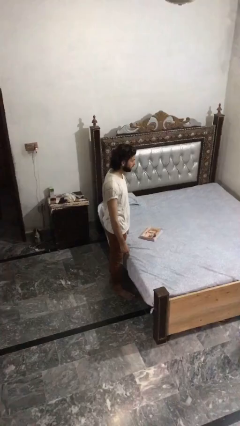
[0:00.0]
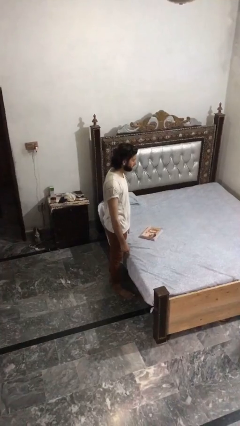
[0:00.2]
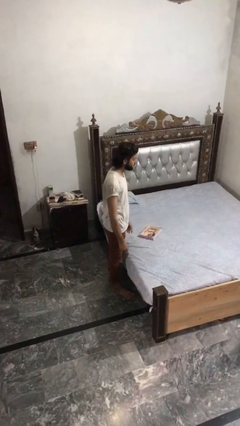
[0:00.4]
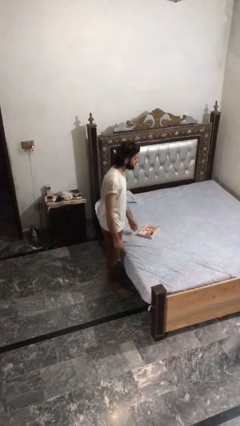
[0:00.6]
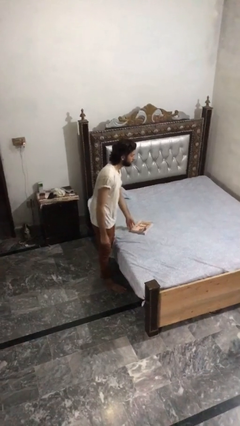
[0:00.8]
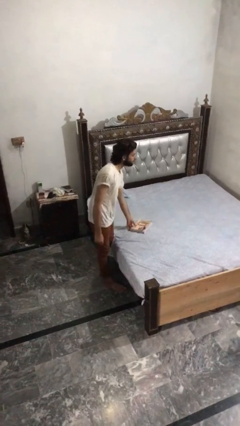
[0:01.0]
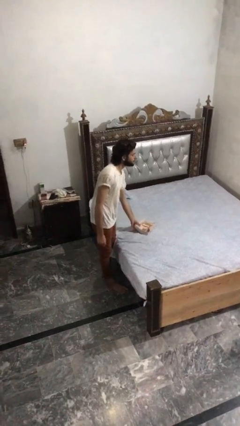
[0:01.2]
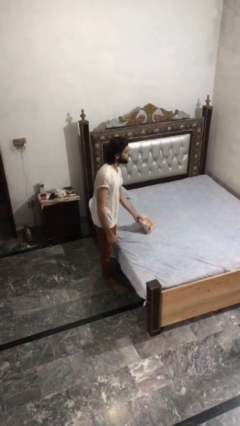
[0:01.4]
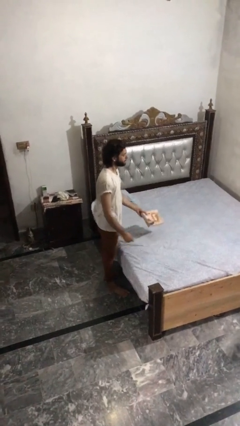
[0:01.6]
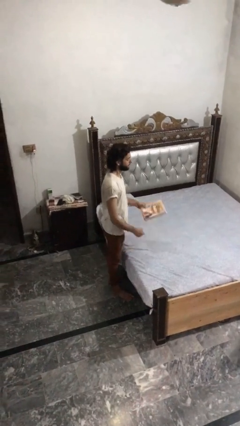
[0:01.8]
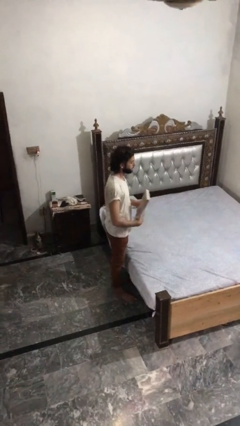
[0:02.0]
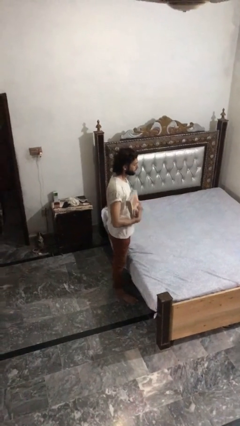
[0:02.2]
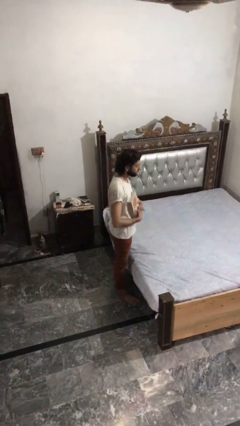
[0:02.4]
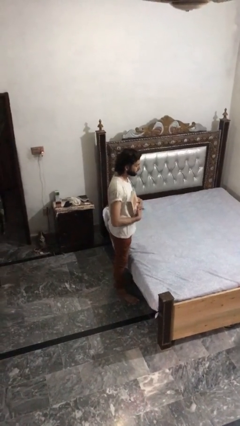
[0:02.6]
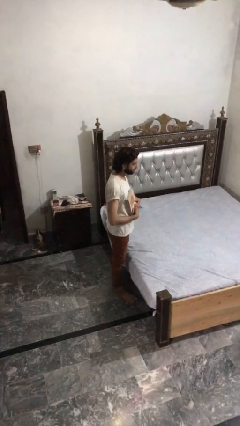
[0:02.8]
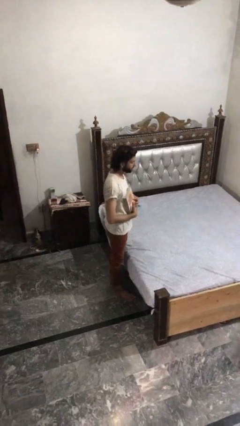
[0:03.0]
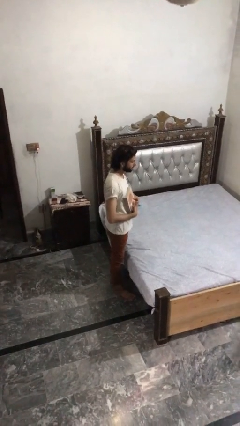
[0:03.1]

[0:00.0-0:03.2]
person picks up object from bed

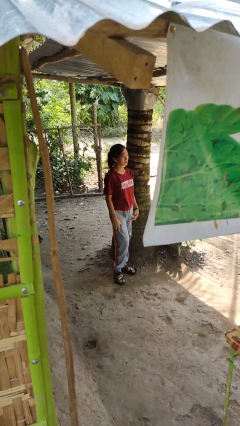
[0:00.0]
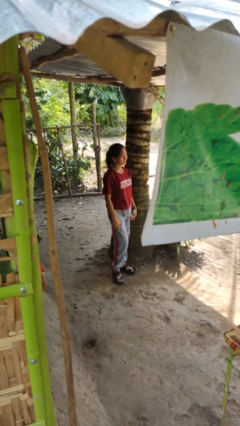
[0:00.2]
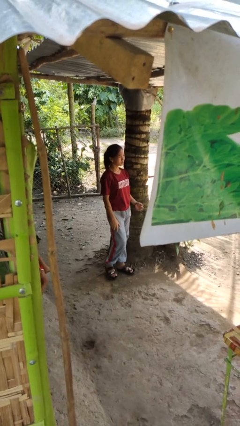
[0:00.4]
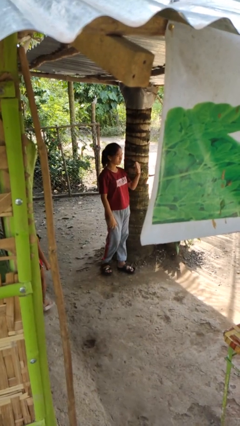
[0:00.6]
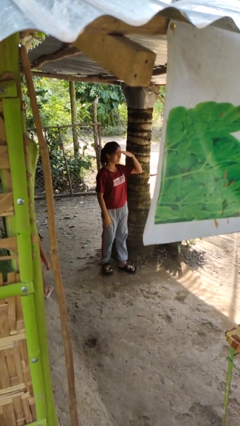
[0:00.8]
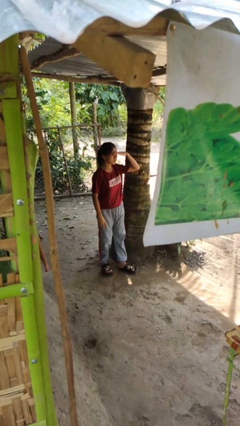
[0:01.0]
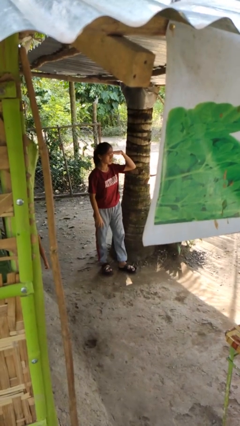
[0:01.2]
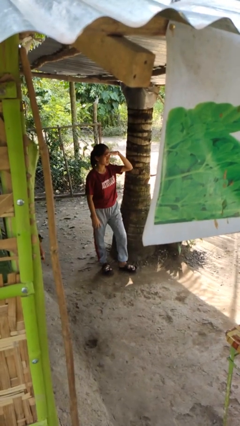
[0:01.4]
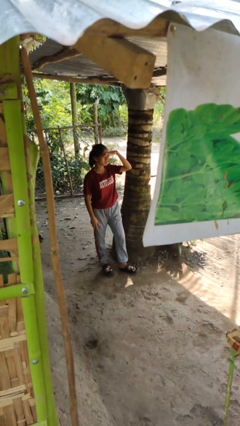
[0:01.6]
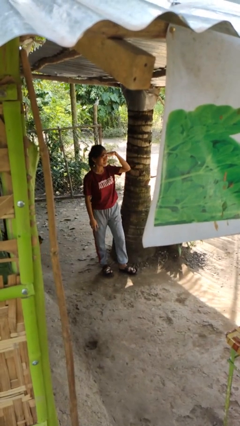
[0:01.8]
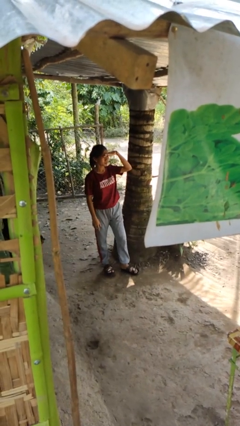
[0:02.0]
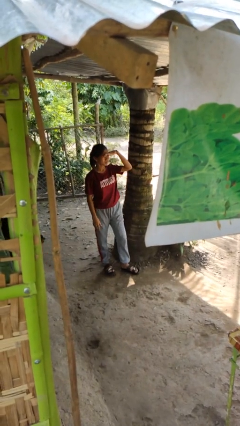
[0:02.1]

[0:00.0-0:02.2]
person shades eyes

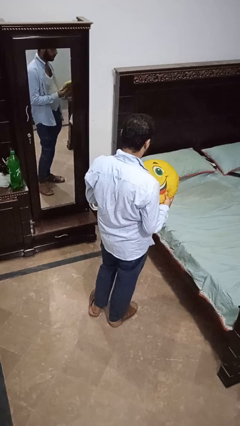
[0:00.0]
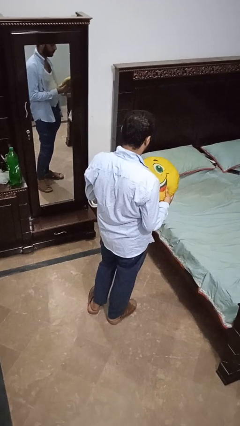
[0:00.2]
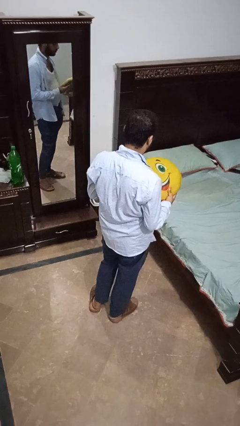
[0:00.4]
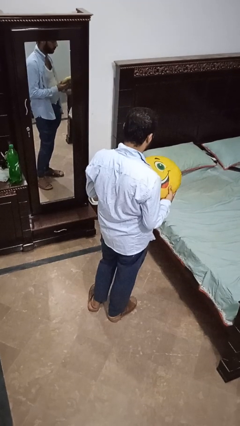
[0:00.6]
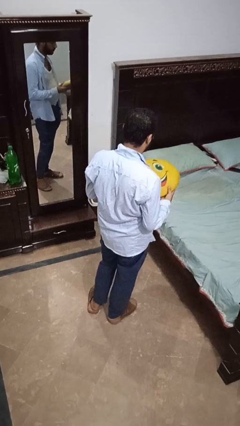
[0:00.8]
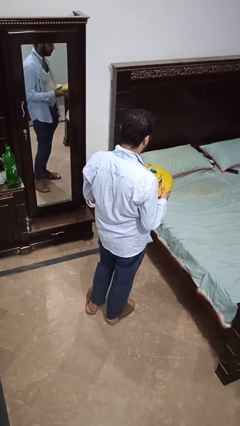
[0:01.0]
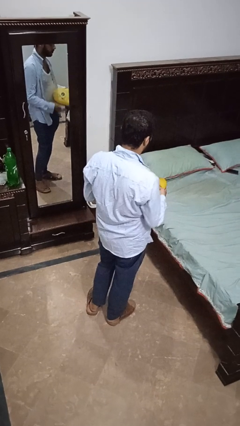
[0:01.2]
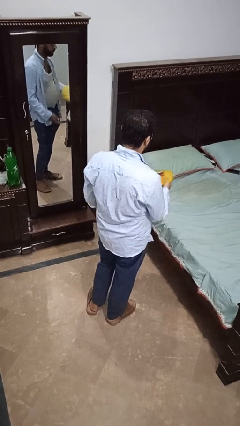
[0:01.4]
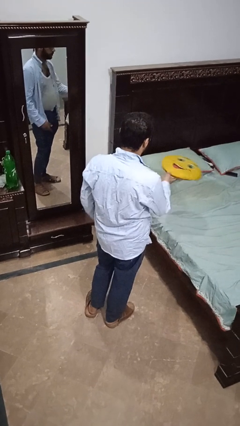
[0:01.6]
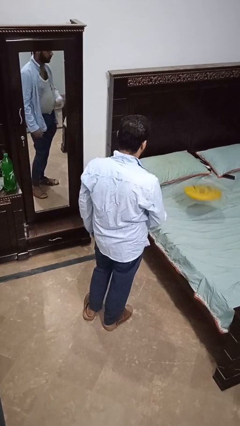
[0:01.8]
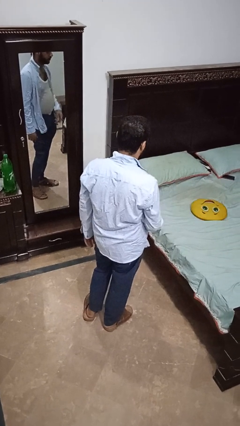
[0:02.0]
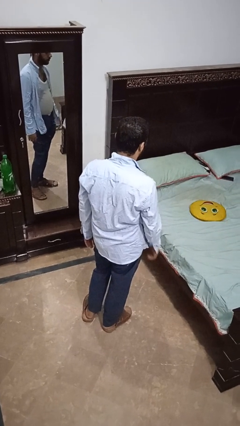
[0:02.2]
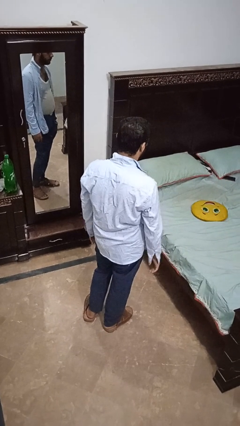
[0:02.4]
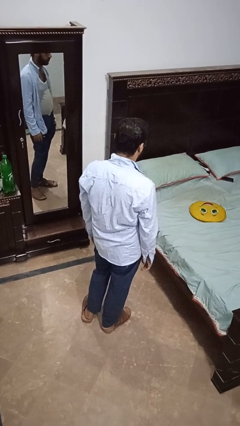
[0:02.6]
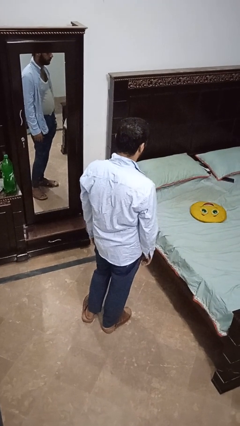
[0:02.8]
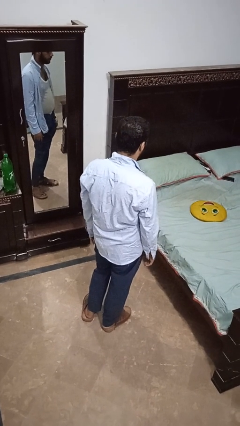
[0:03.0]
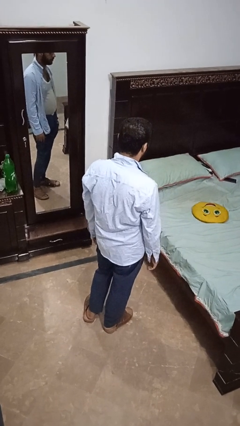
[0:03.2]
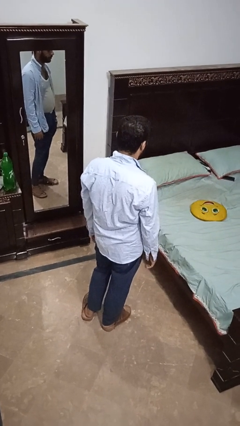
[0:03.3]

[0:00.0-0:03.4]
person throws object on bed

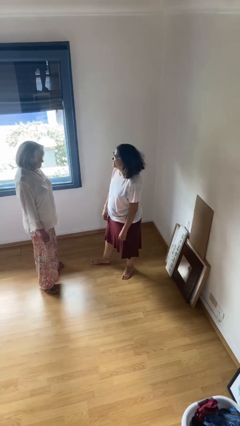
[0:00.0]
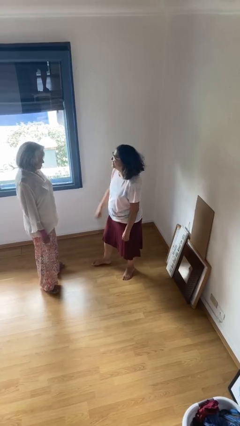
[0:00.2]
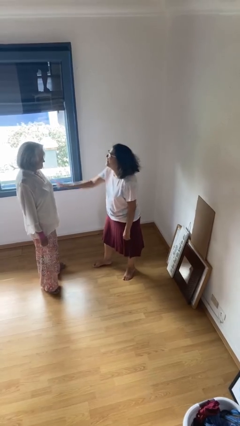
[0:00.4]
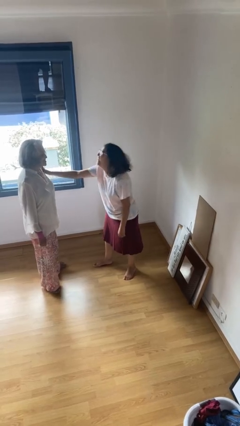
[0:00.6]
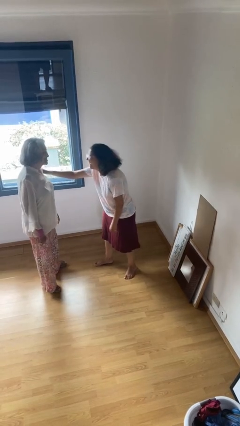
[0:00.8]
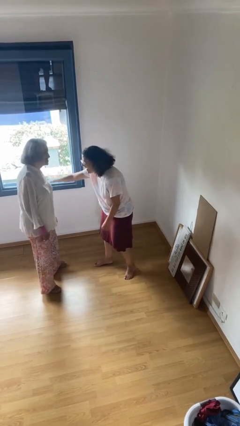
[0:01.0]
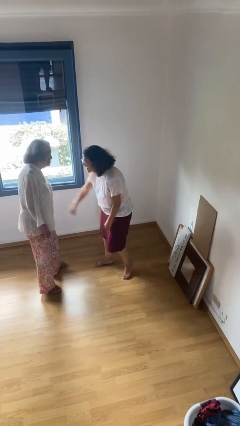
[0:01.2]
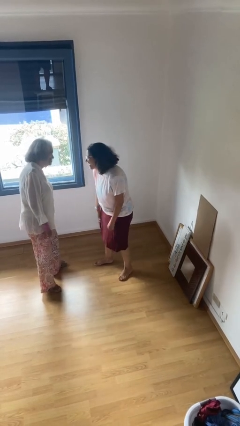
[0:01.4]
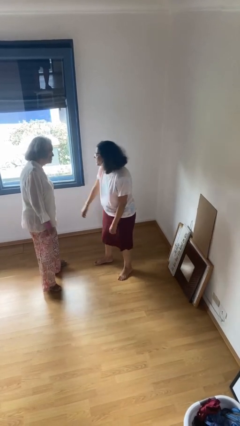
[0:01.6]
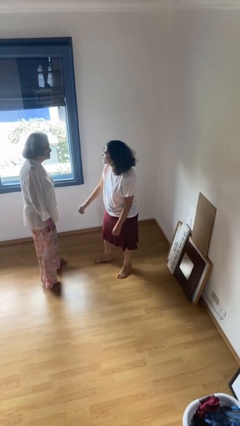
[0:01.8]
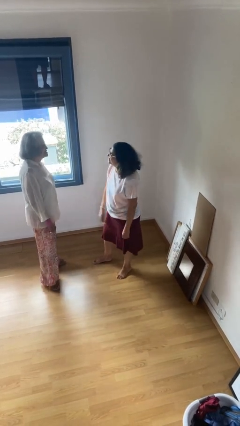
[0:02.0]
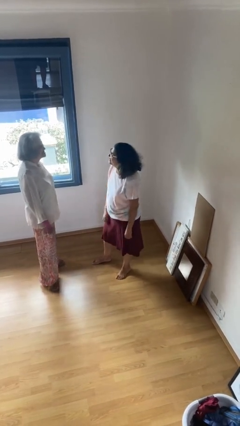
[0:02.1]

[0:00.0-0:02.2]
person shoves person

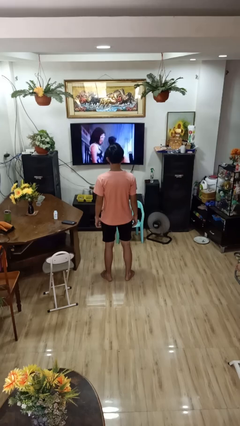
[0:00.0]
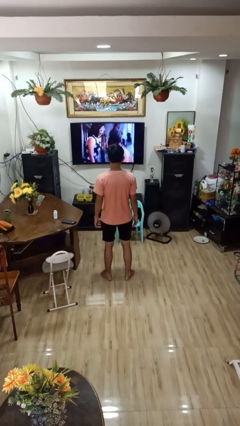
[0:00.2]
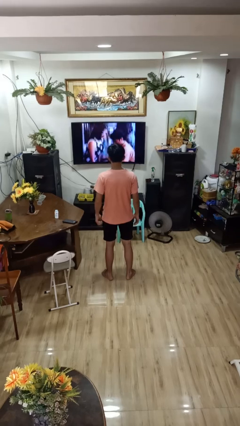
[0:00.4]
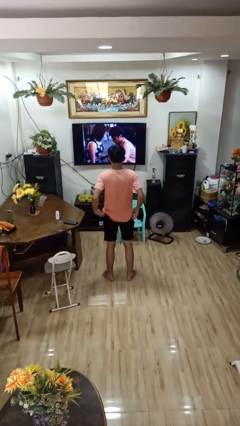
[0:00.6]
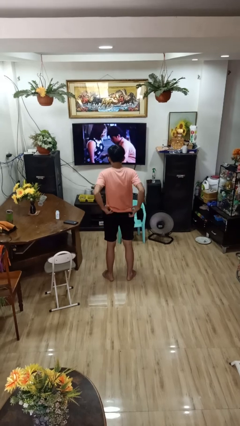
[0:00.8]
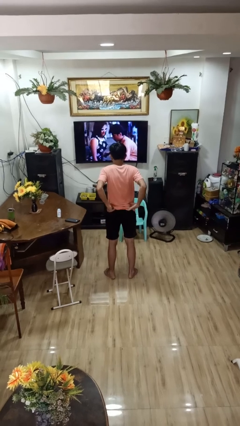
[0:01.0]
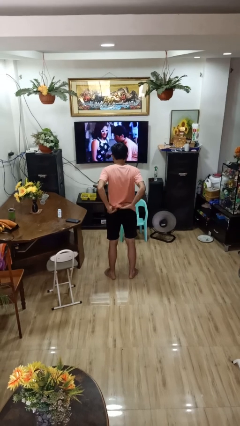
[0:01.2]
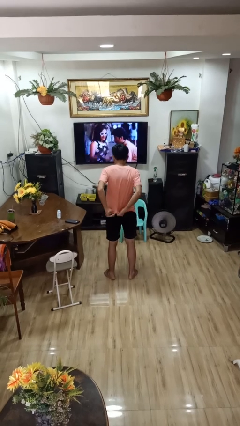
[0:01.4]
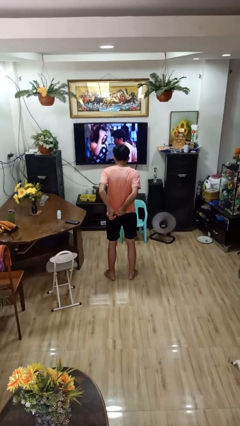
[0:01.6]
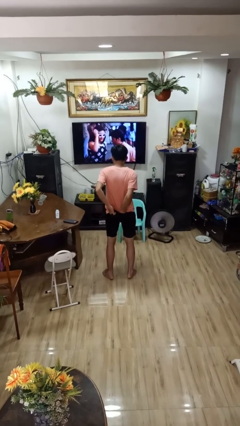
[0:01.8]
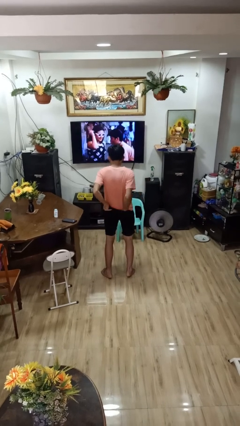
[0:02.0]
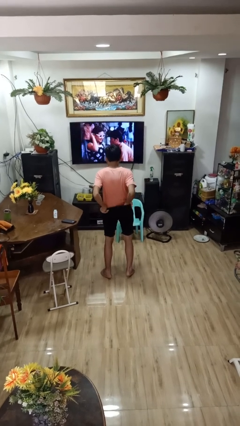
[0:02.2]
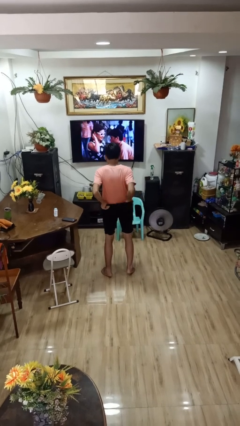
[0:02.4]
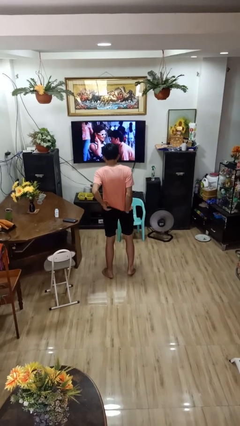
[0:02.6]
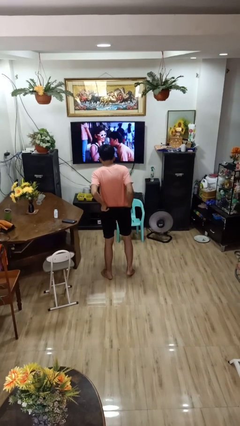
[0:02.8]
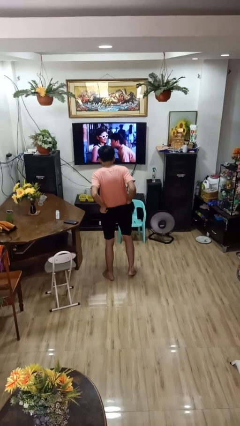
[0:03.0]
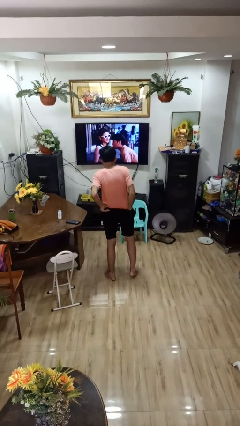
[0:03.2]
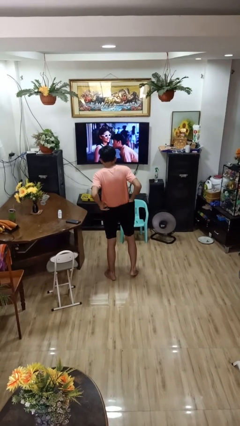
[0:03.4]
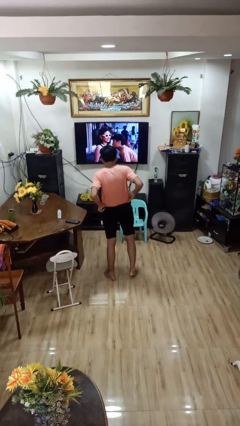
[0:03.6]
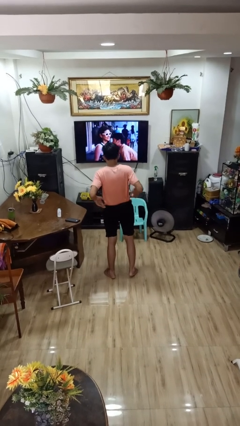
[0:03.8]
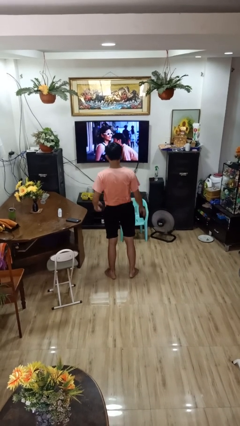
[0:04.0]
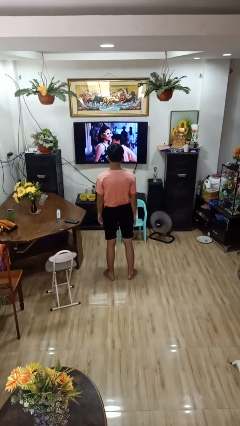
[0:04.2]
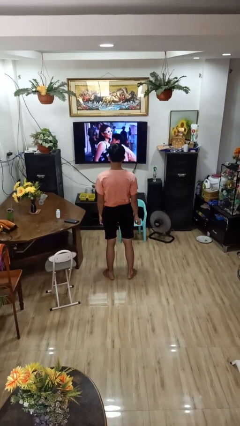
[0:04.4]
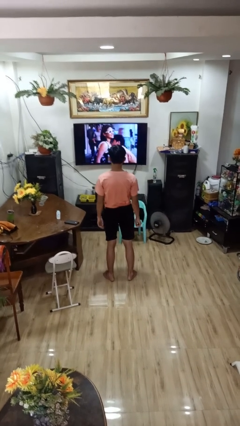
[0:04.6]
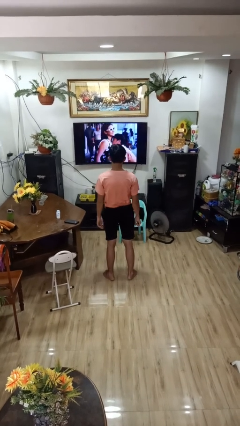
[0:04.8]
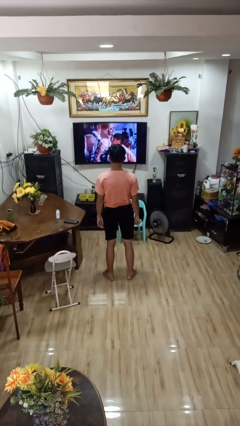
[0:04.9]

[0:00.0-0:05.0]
person tucks in shirt

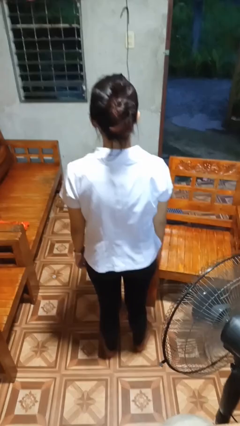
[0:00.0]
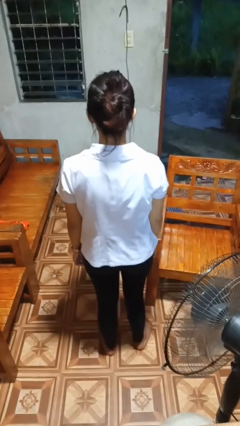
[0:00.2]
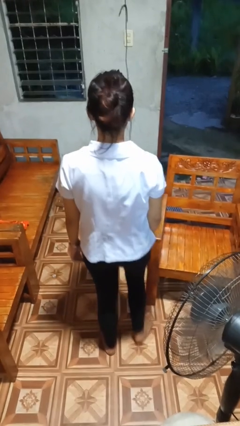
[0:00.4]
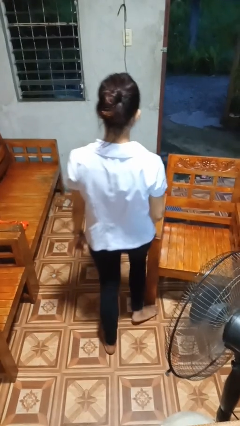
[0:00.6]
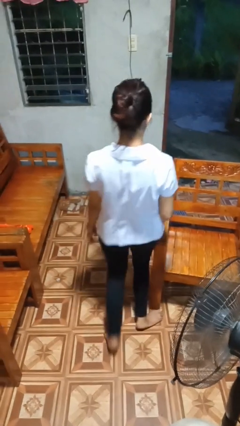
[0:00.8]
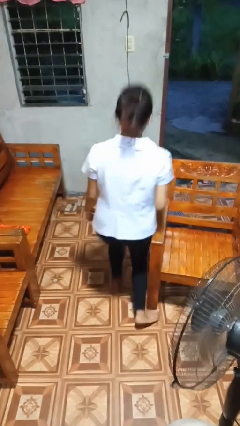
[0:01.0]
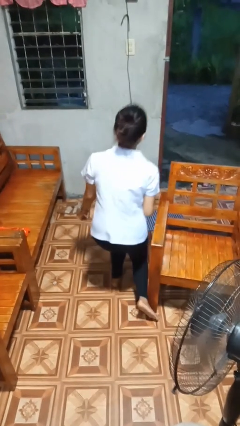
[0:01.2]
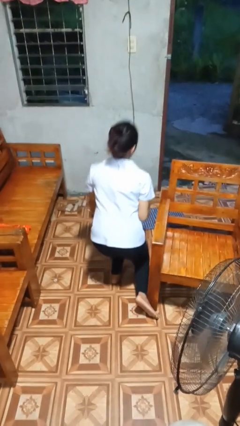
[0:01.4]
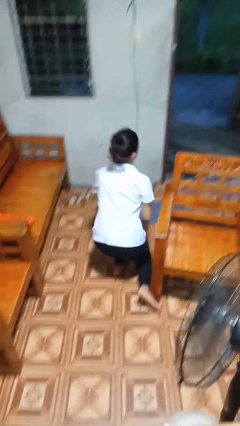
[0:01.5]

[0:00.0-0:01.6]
person trips on object on floor
